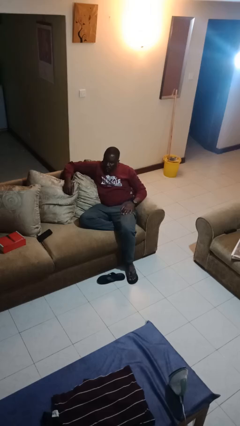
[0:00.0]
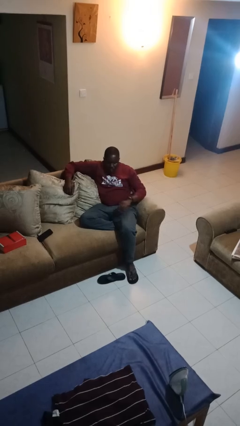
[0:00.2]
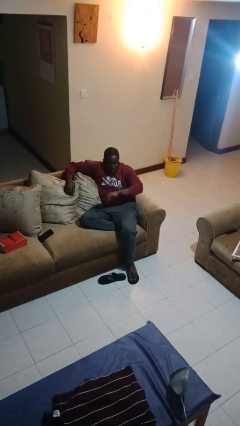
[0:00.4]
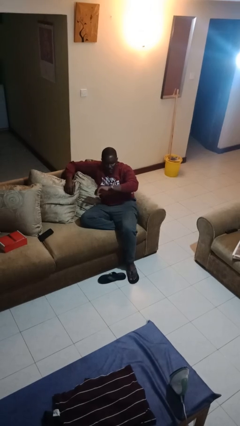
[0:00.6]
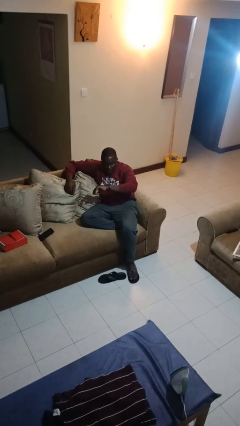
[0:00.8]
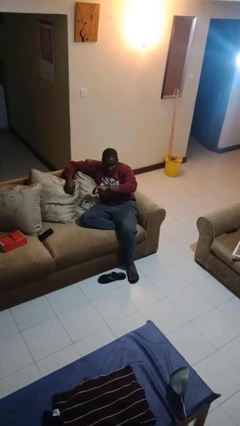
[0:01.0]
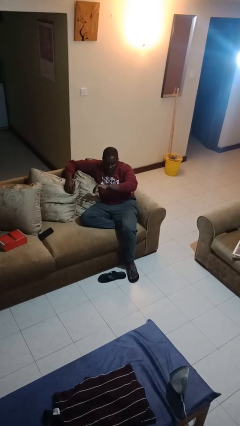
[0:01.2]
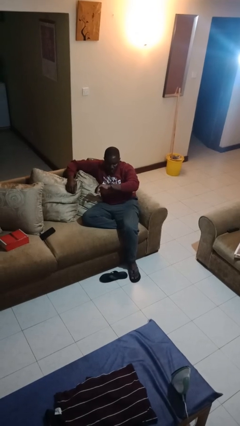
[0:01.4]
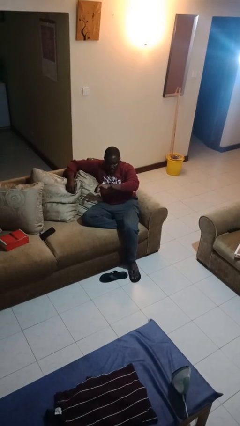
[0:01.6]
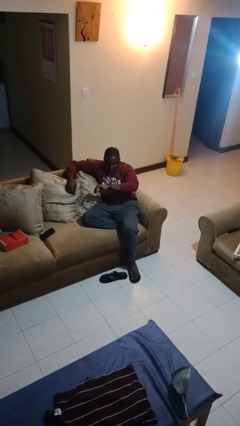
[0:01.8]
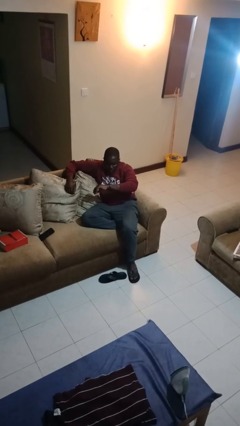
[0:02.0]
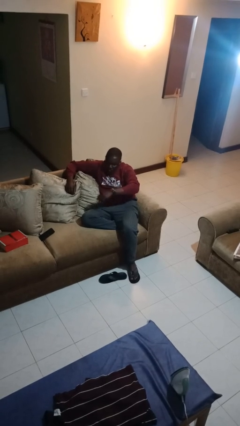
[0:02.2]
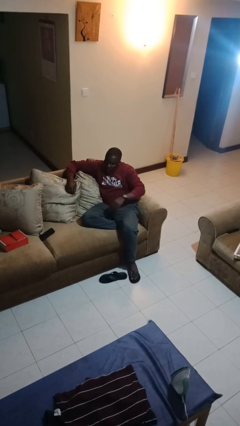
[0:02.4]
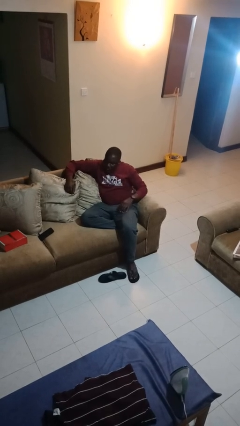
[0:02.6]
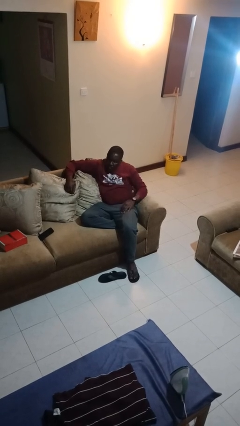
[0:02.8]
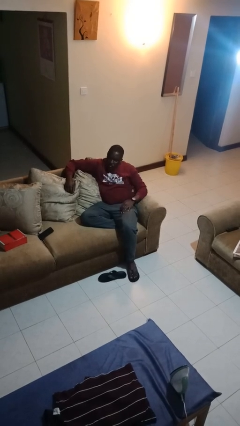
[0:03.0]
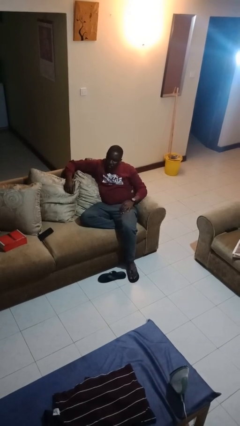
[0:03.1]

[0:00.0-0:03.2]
person looks at wristwatch

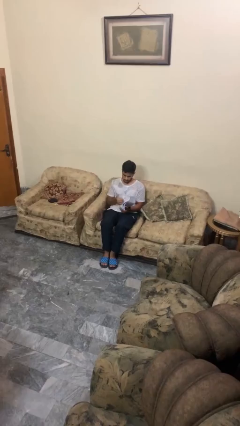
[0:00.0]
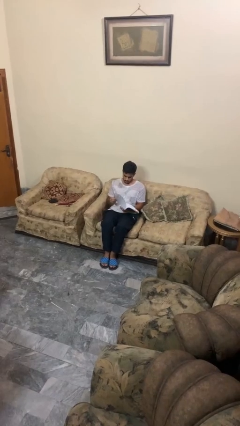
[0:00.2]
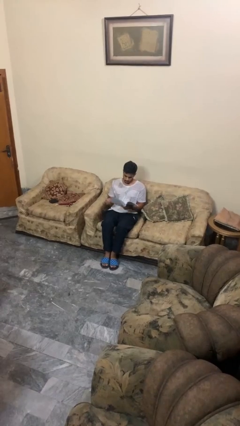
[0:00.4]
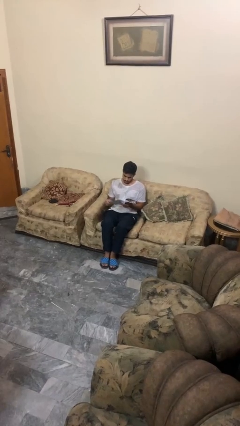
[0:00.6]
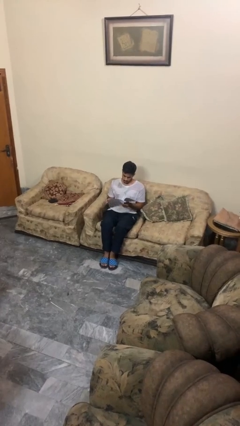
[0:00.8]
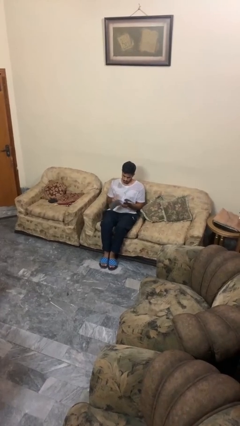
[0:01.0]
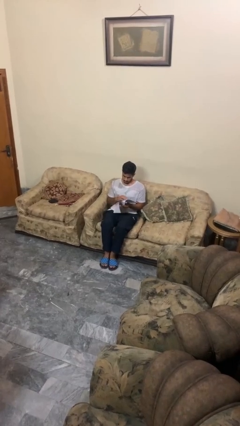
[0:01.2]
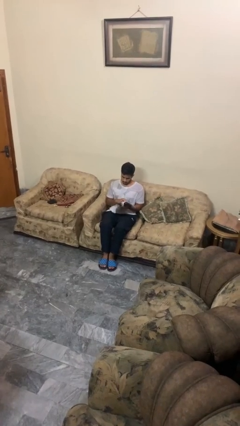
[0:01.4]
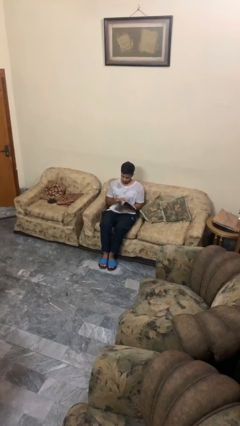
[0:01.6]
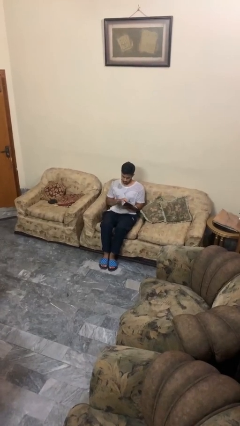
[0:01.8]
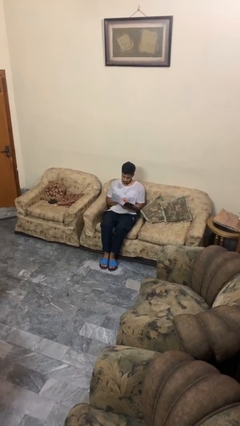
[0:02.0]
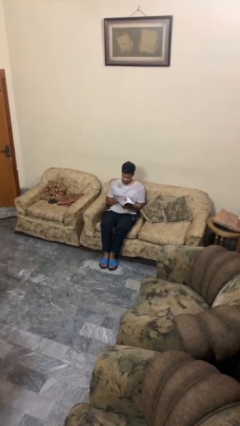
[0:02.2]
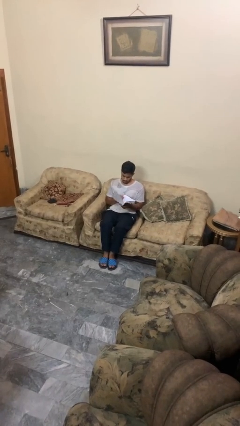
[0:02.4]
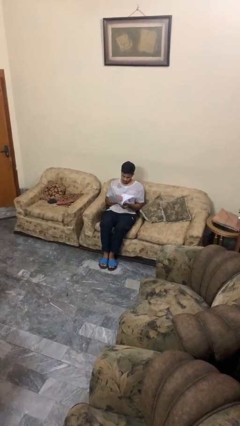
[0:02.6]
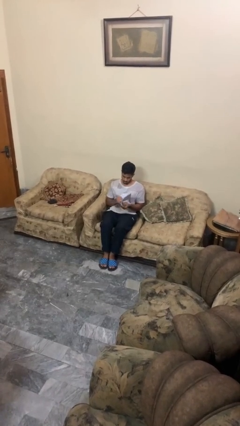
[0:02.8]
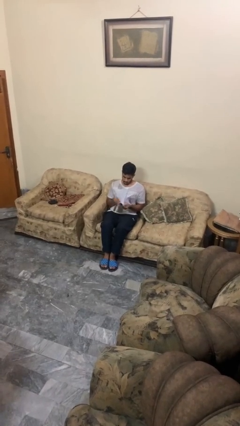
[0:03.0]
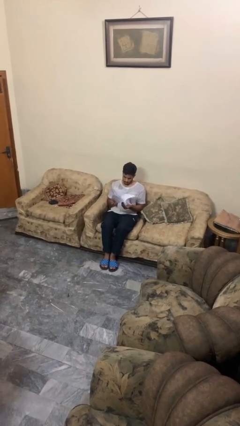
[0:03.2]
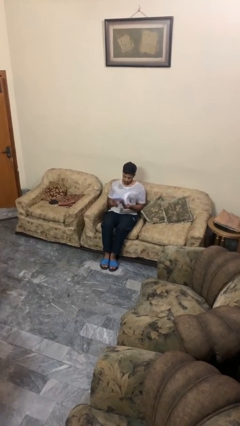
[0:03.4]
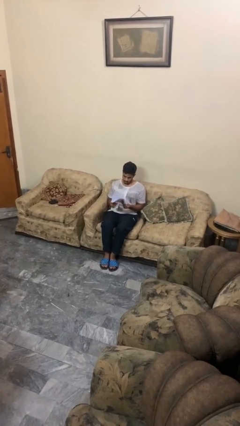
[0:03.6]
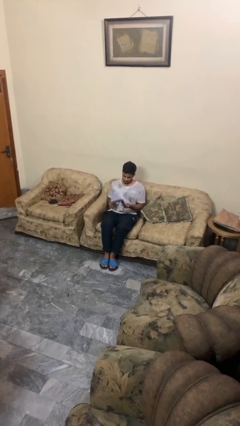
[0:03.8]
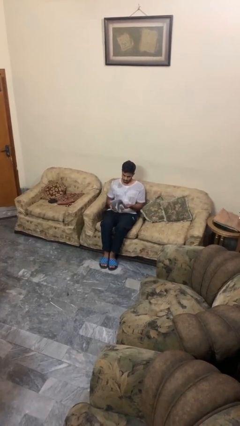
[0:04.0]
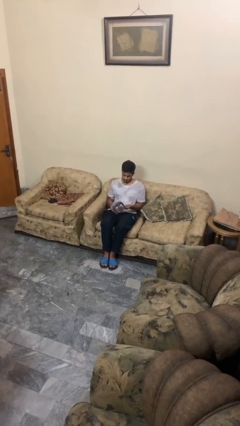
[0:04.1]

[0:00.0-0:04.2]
person reads magazine

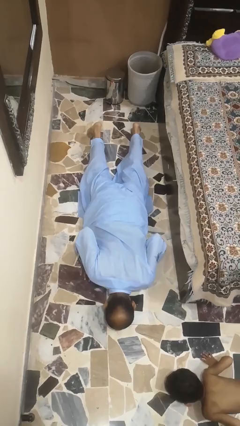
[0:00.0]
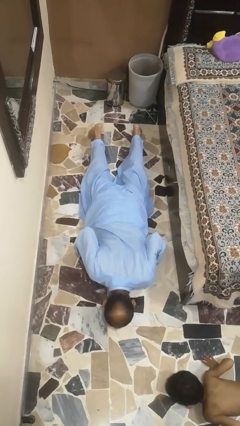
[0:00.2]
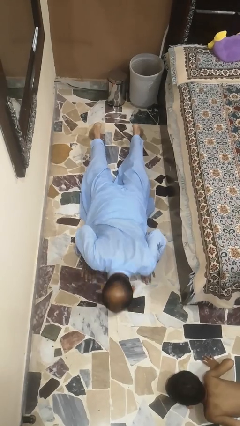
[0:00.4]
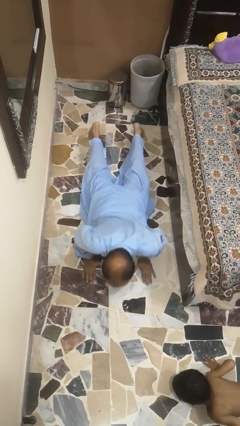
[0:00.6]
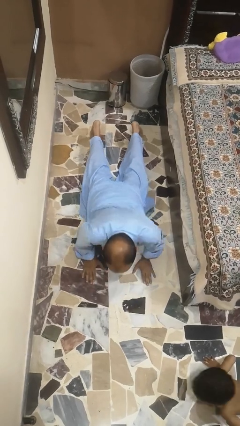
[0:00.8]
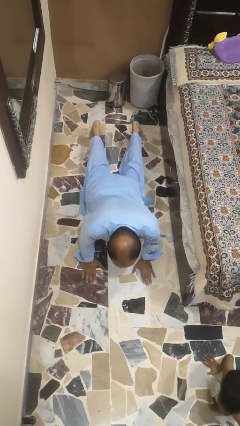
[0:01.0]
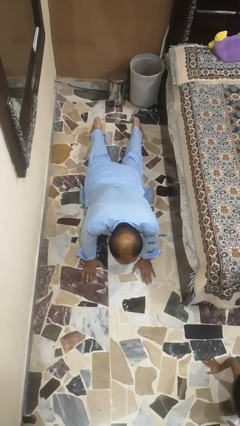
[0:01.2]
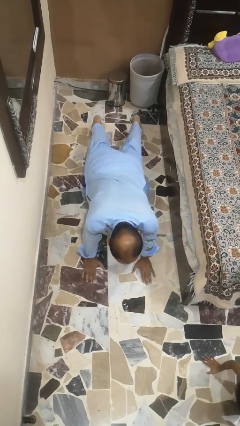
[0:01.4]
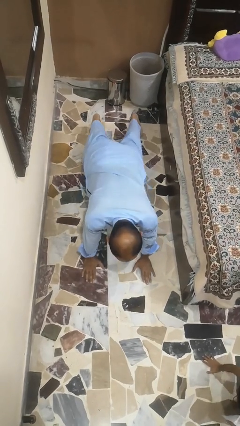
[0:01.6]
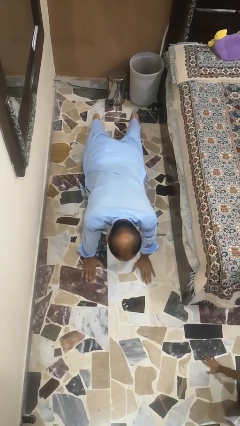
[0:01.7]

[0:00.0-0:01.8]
person exercises with pushup

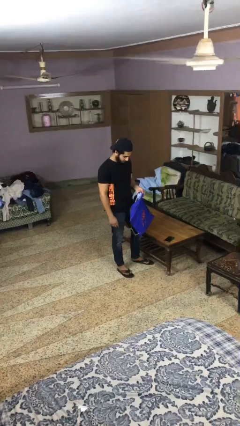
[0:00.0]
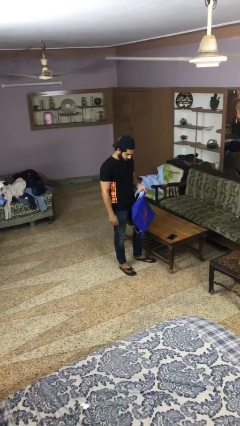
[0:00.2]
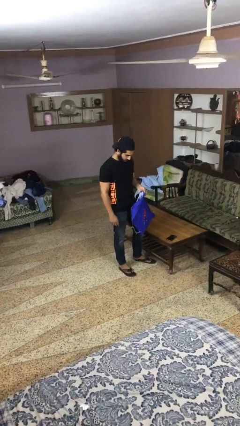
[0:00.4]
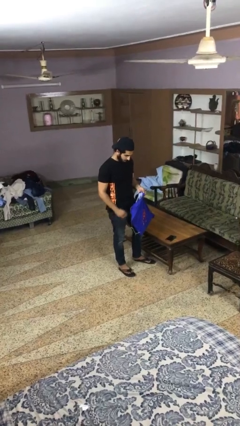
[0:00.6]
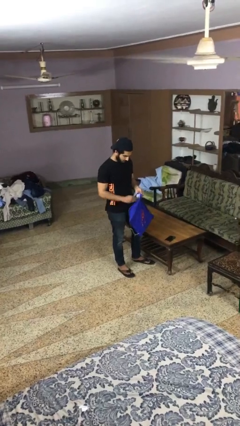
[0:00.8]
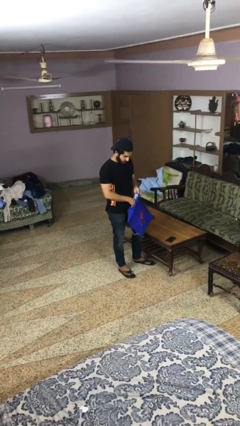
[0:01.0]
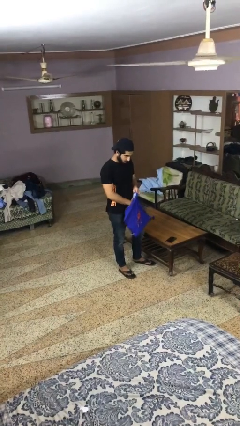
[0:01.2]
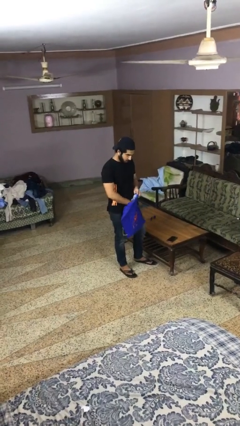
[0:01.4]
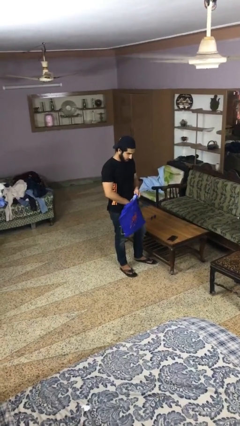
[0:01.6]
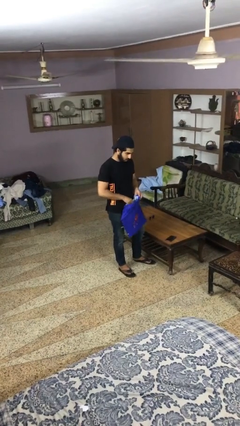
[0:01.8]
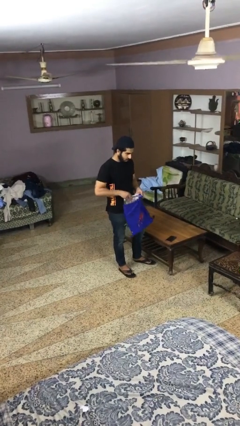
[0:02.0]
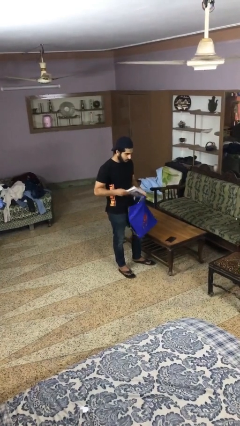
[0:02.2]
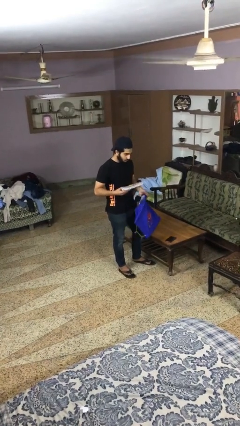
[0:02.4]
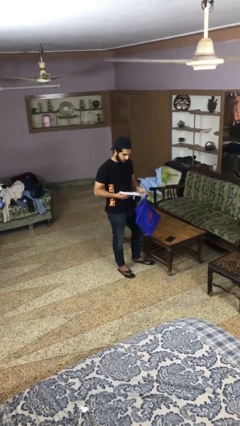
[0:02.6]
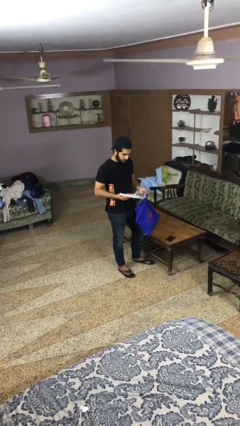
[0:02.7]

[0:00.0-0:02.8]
person takes object from bag

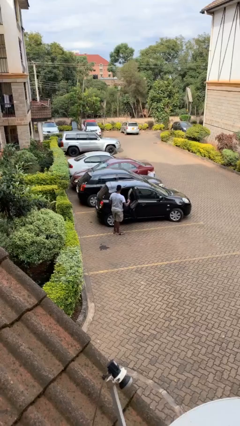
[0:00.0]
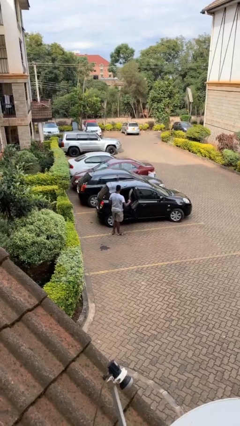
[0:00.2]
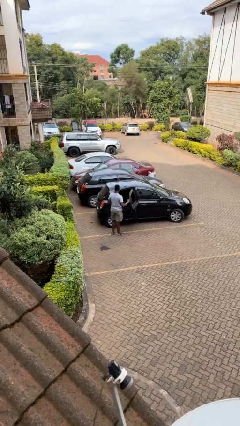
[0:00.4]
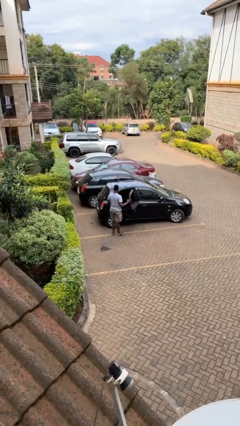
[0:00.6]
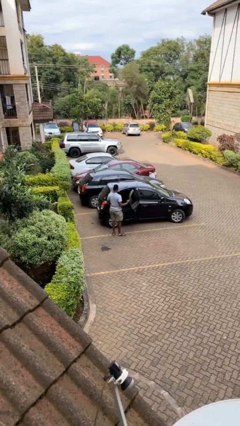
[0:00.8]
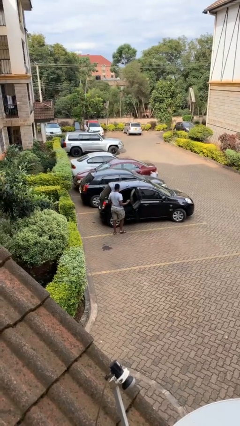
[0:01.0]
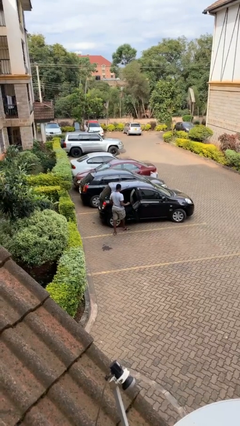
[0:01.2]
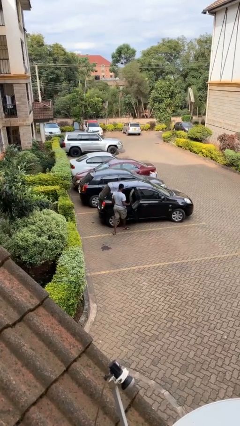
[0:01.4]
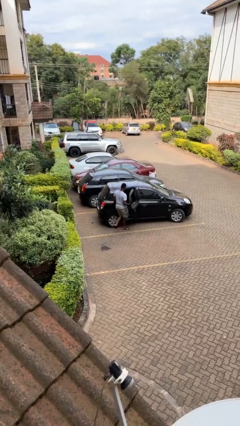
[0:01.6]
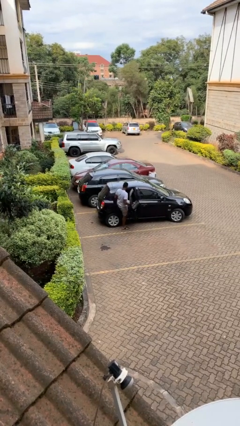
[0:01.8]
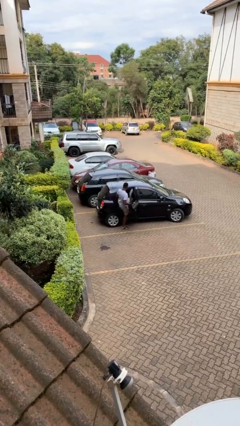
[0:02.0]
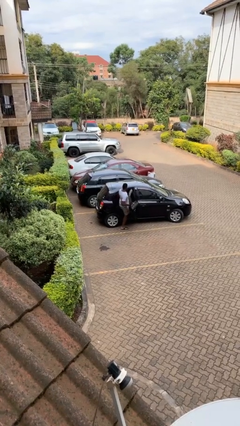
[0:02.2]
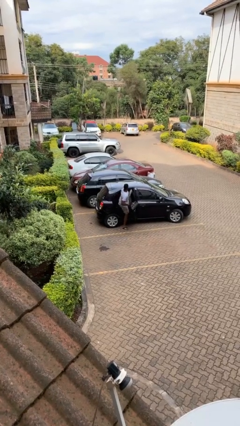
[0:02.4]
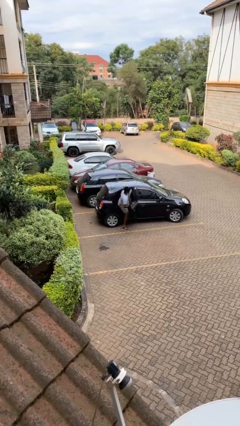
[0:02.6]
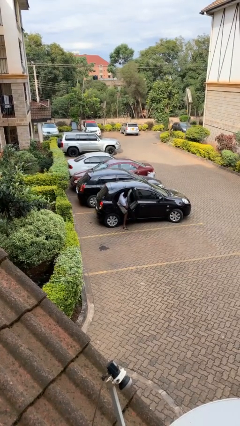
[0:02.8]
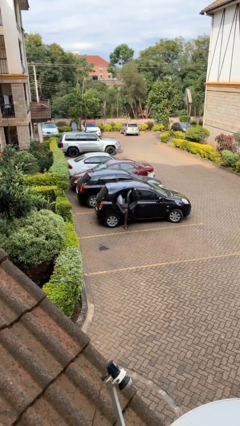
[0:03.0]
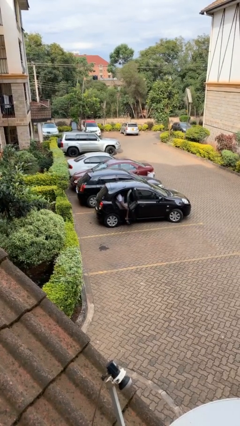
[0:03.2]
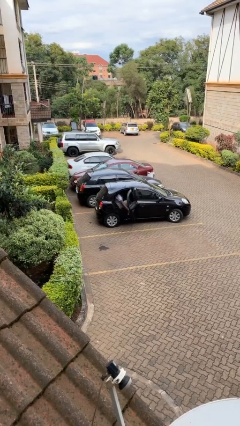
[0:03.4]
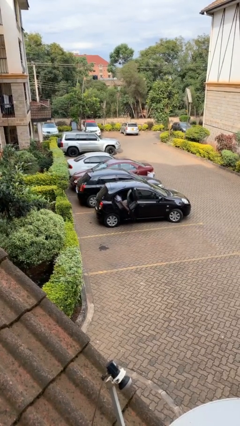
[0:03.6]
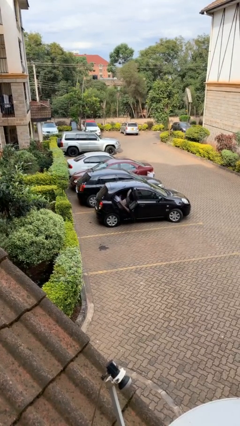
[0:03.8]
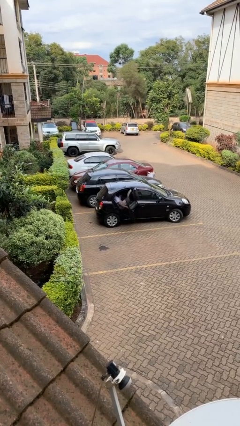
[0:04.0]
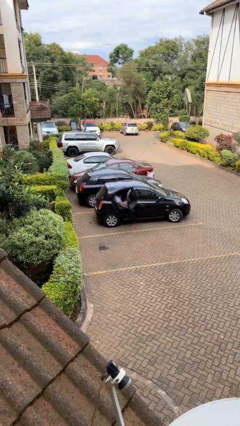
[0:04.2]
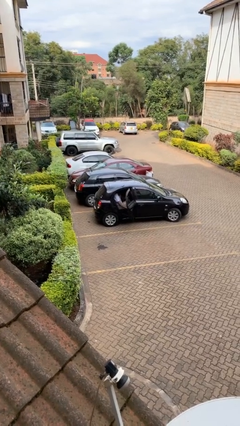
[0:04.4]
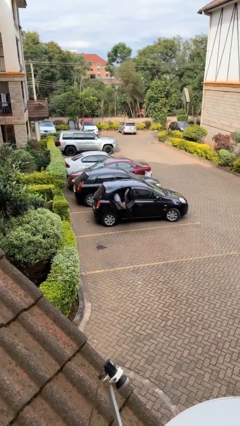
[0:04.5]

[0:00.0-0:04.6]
person enters car

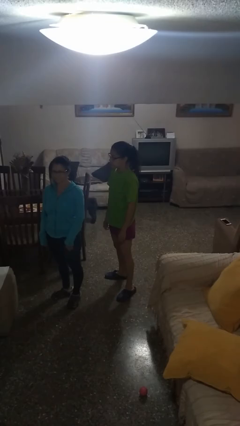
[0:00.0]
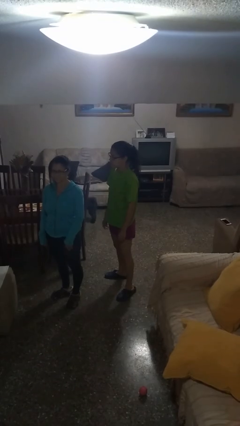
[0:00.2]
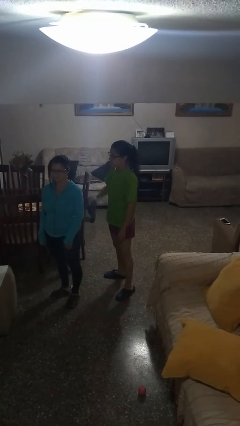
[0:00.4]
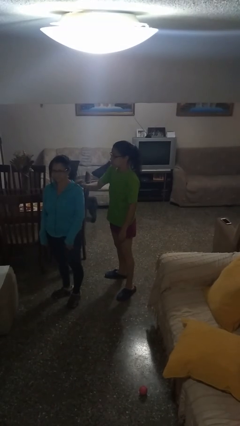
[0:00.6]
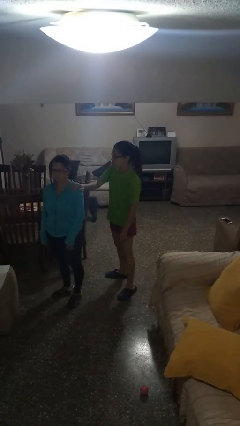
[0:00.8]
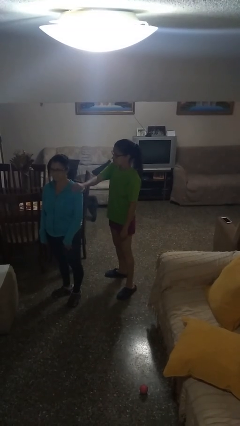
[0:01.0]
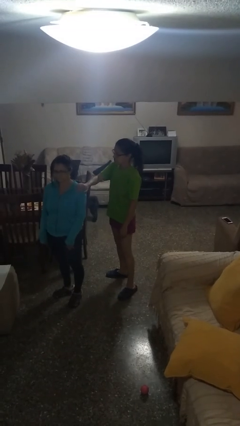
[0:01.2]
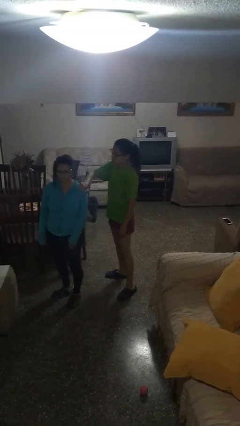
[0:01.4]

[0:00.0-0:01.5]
person grabs person by shoulder
